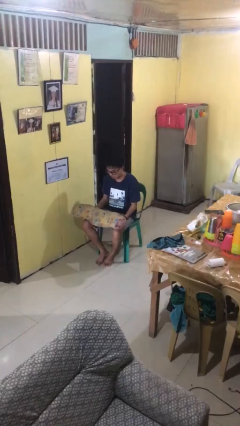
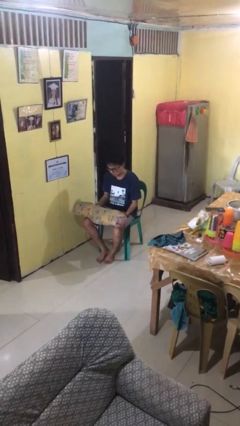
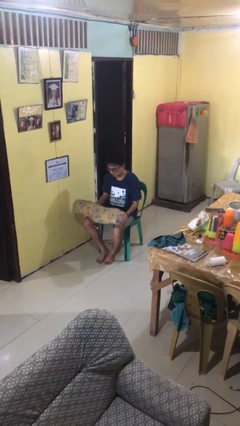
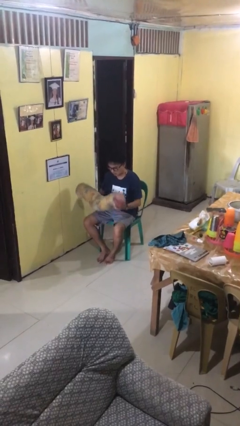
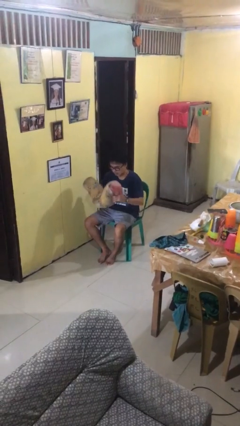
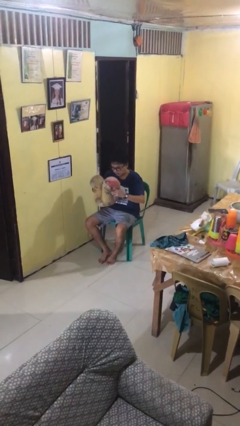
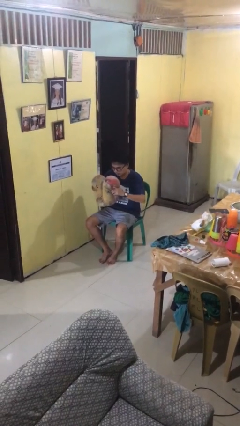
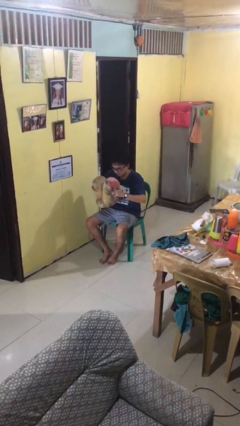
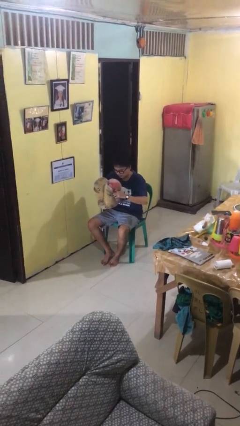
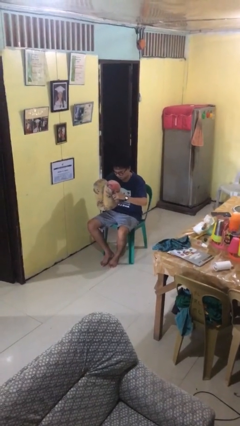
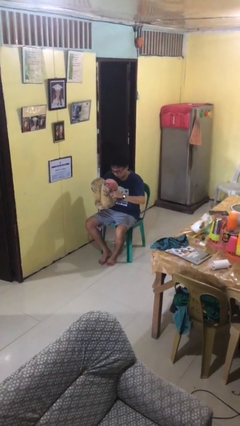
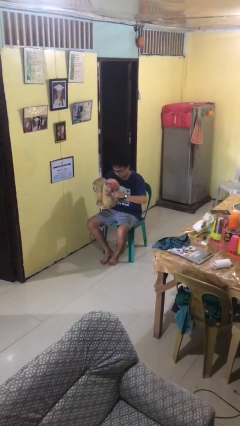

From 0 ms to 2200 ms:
person squeezes object

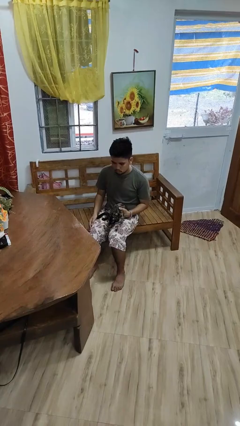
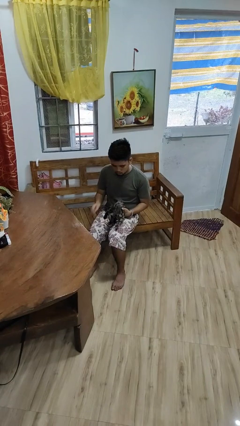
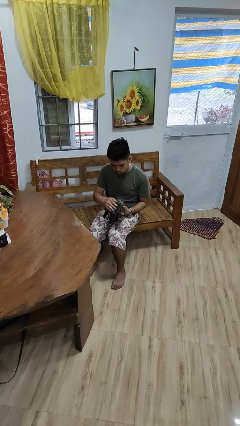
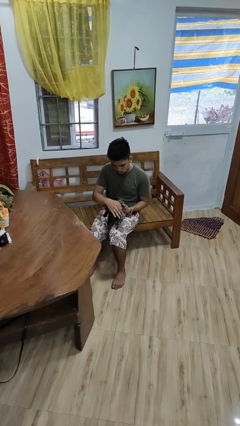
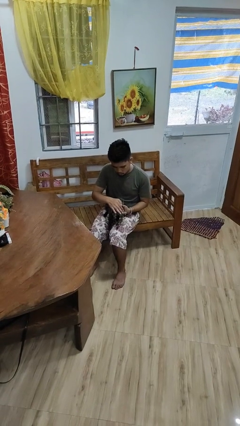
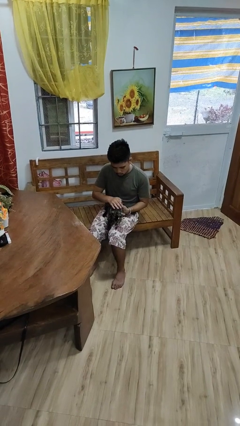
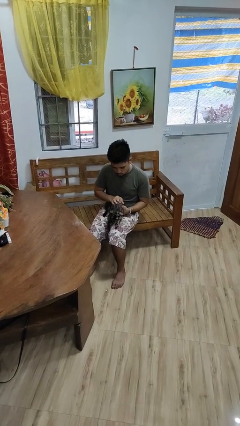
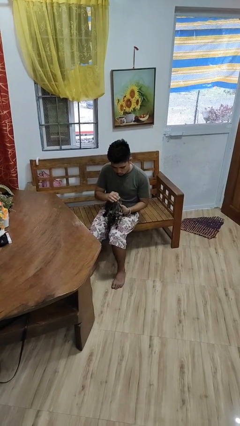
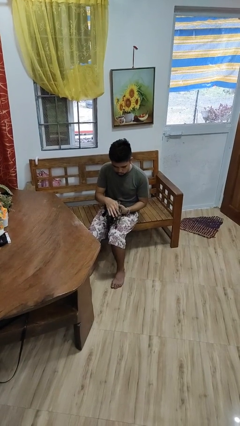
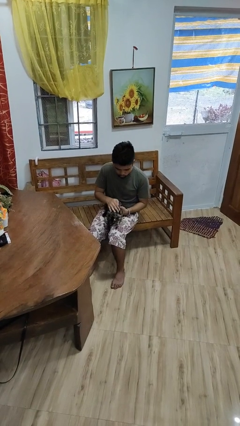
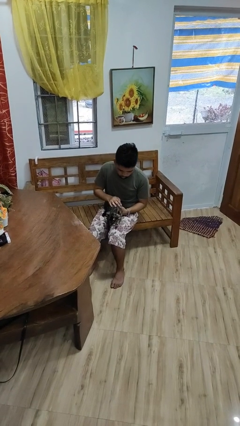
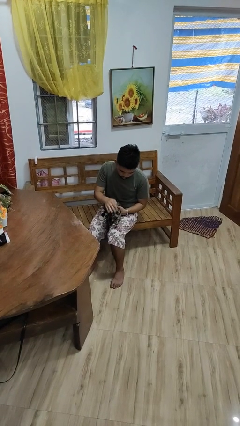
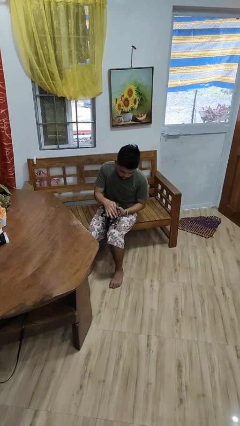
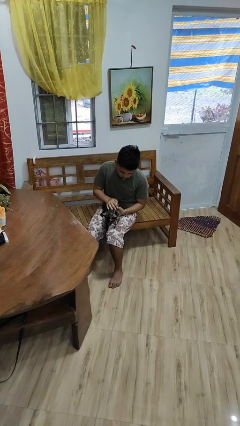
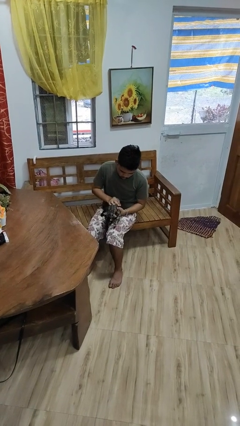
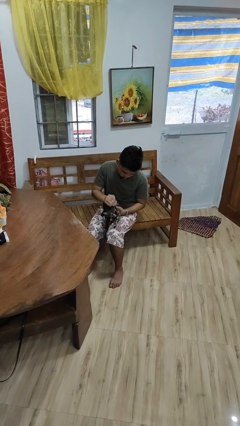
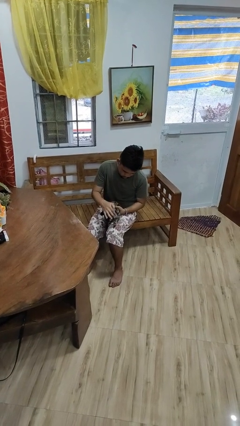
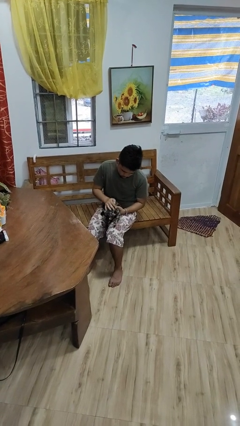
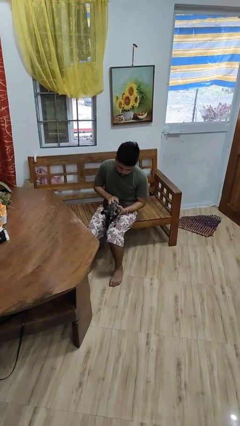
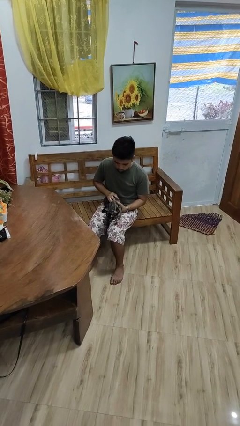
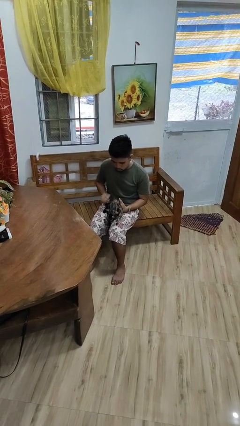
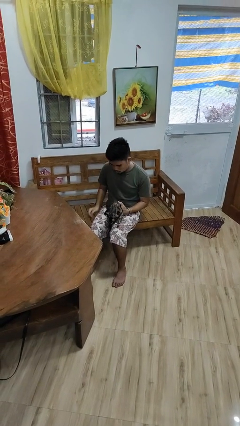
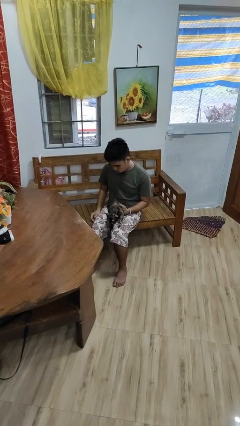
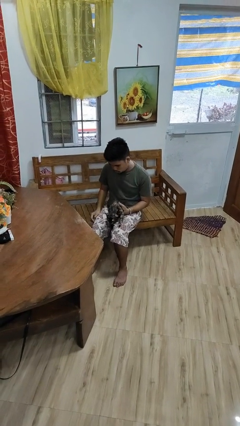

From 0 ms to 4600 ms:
person pets cat

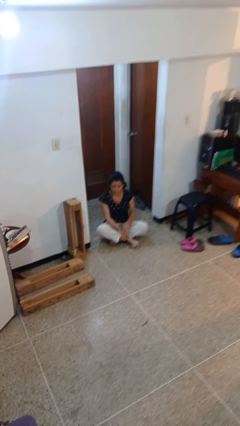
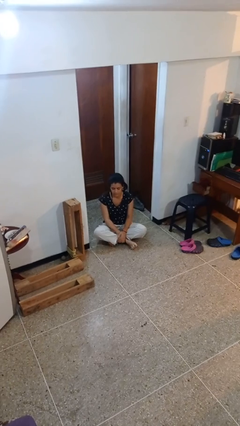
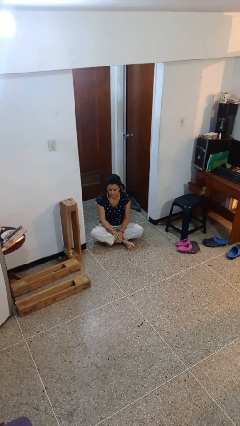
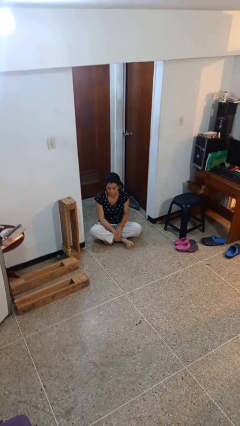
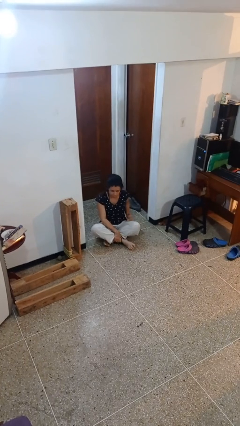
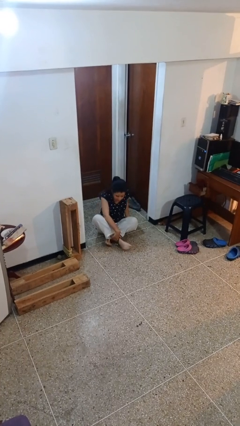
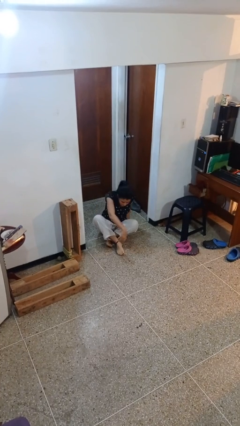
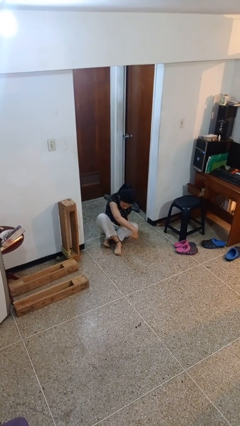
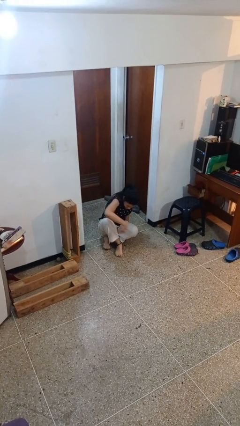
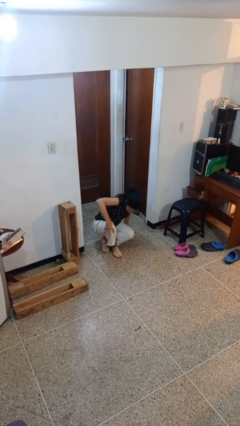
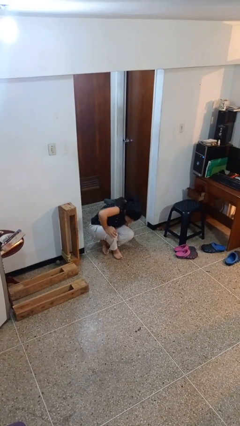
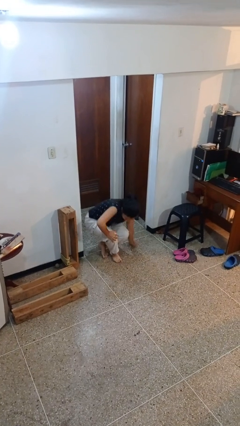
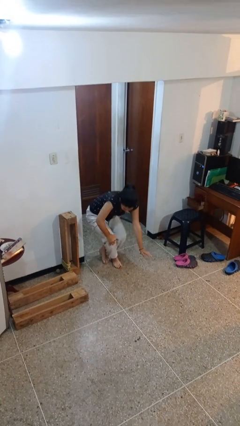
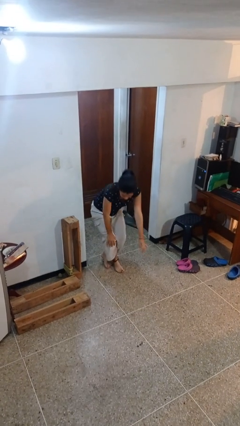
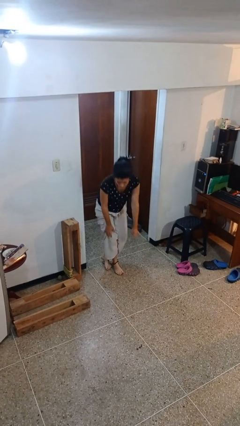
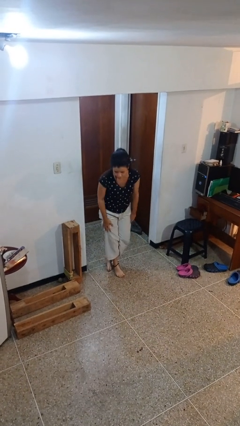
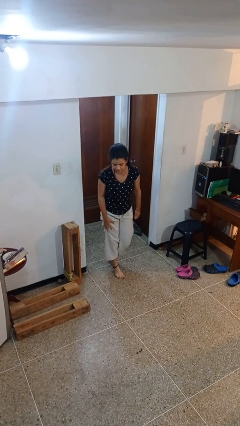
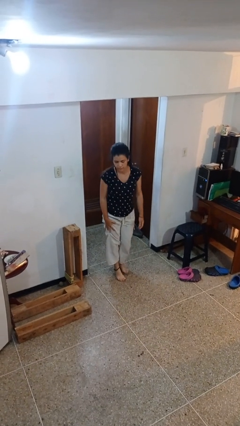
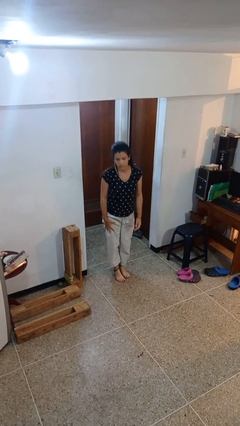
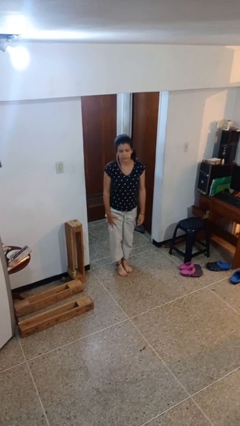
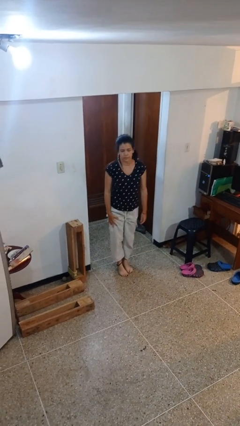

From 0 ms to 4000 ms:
person stands up from floor

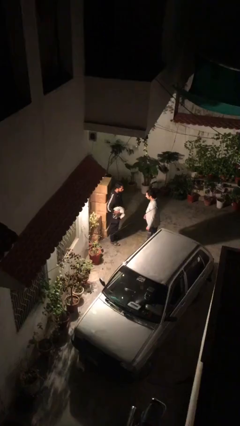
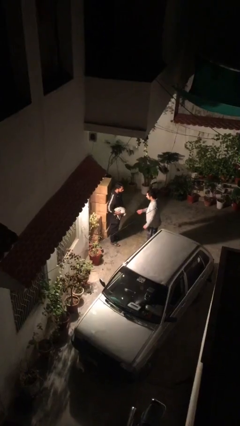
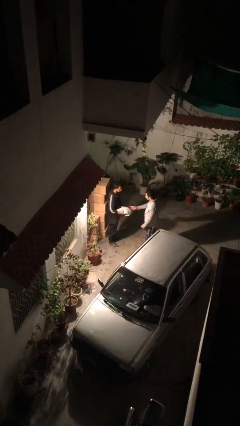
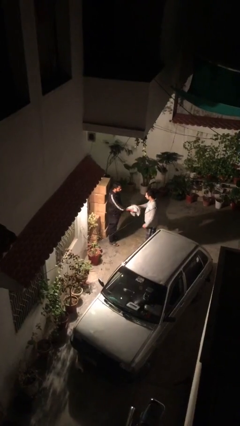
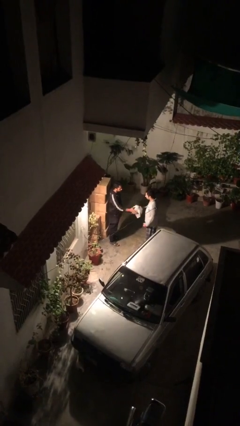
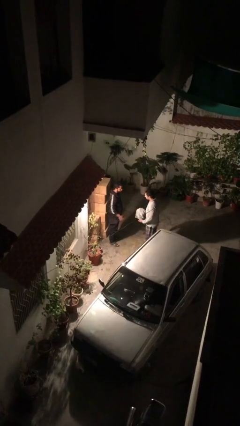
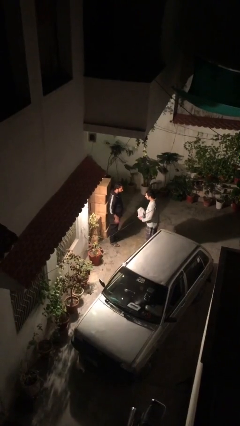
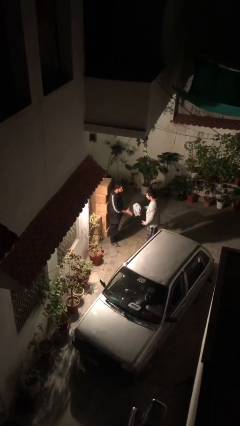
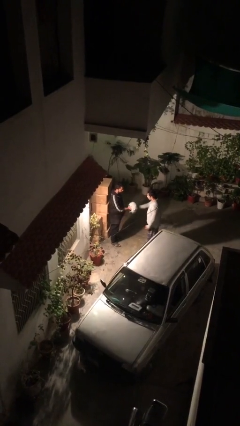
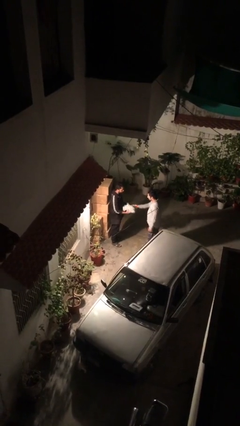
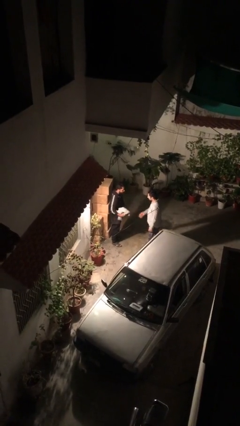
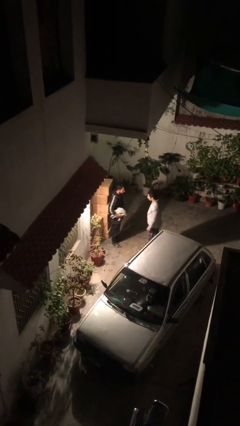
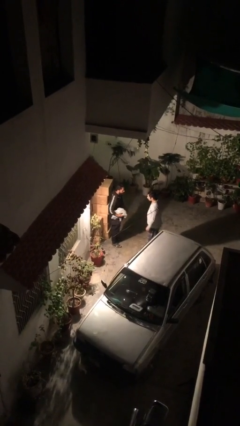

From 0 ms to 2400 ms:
person transfers object to person

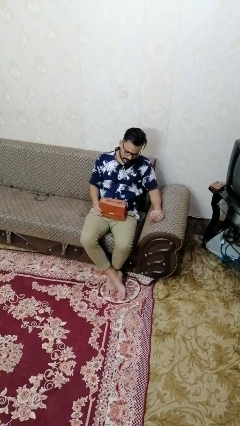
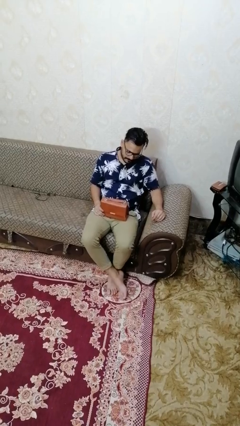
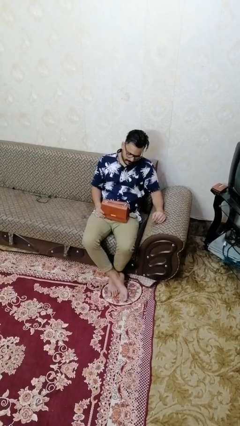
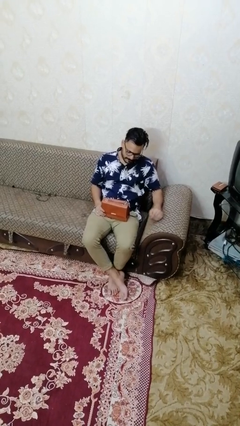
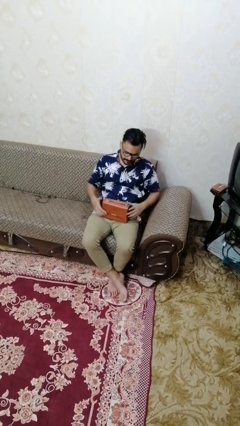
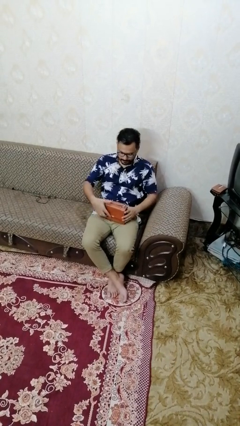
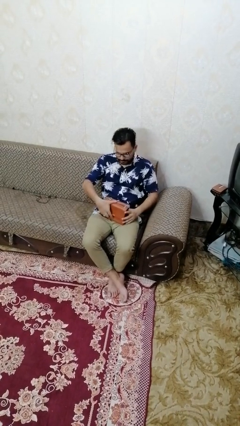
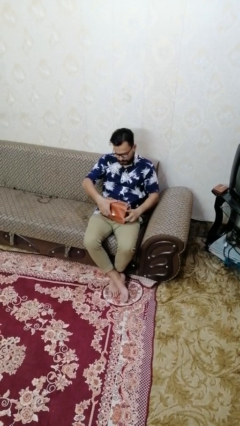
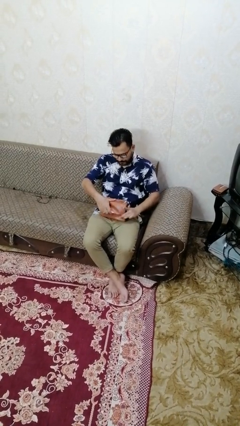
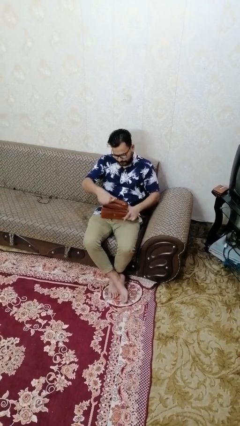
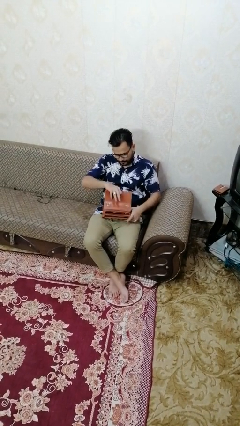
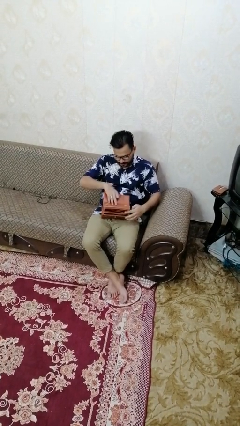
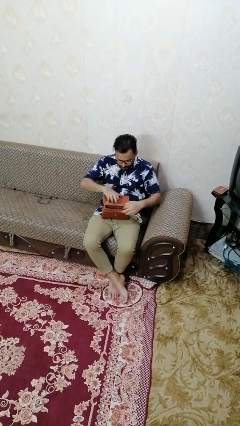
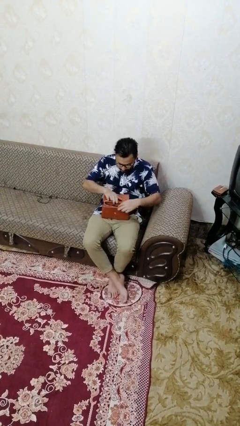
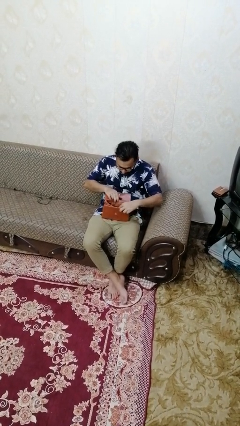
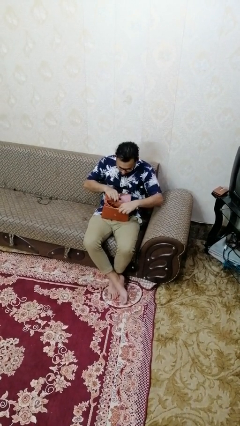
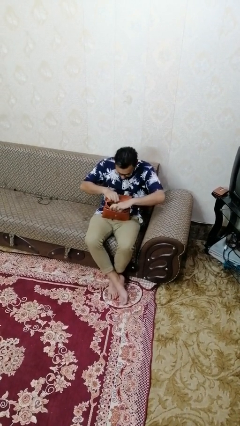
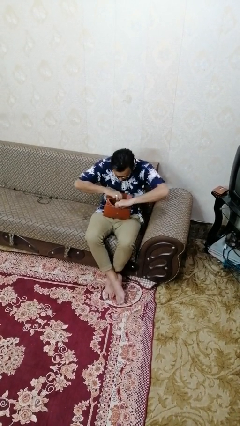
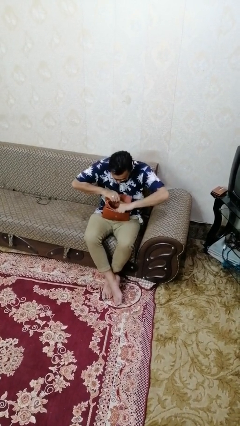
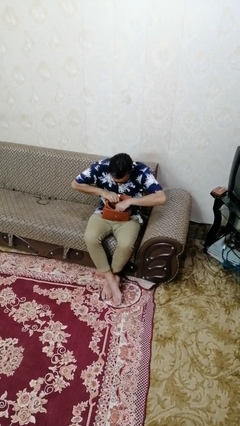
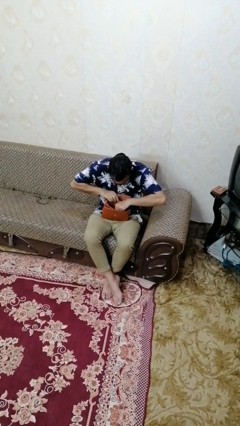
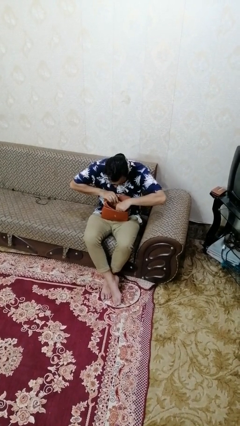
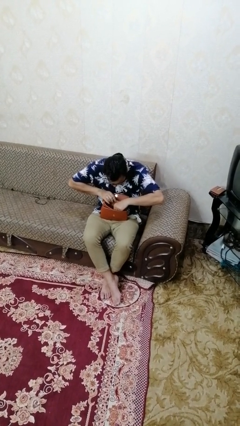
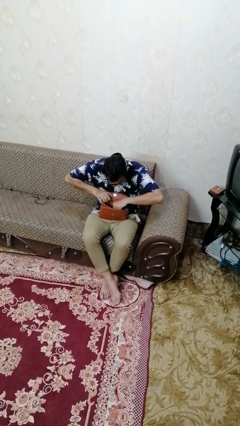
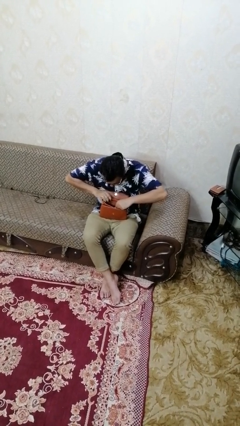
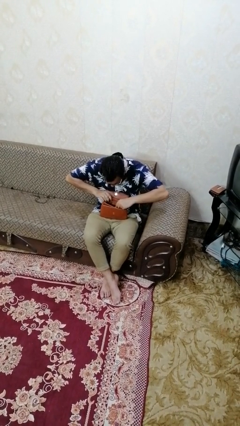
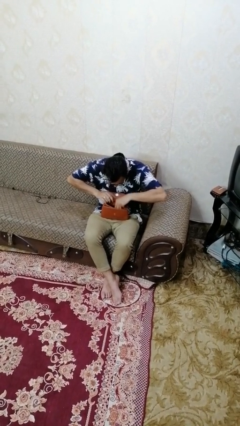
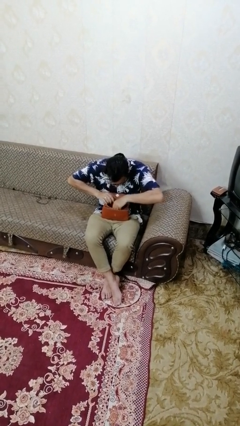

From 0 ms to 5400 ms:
person searches in purse
